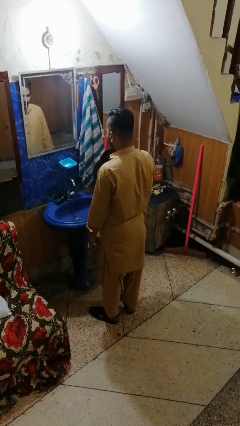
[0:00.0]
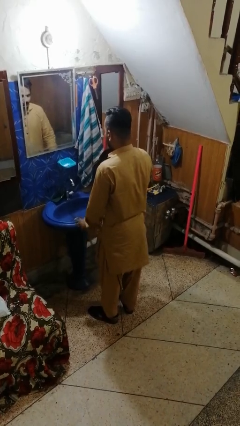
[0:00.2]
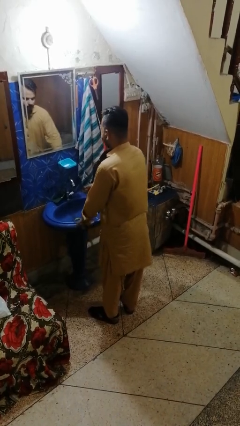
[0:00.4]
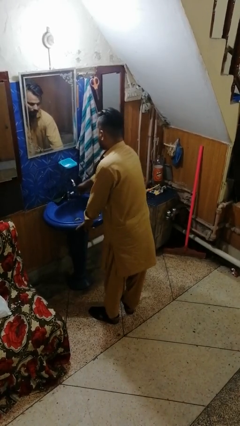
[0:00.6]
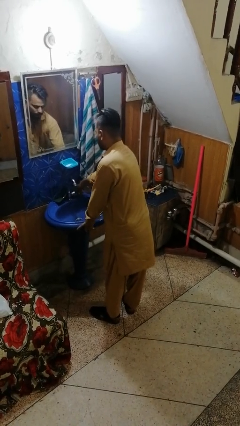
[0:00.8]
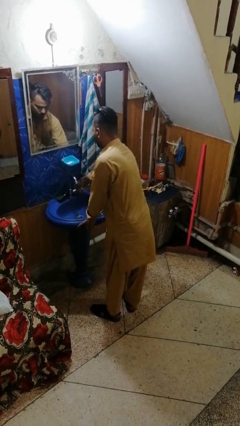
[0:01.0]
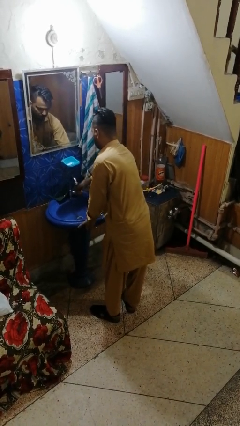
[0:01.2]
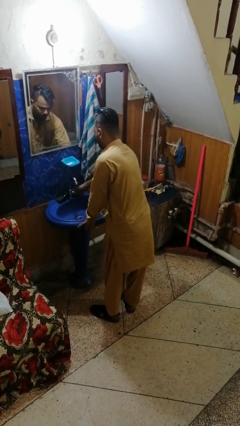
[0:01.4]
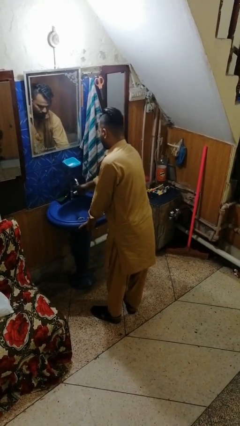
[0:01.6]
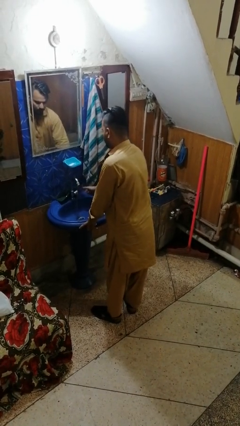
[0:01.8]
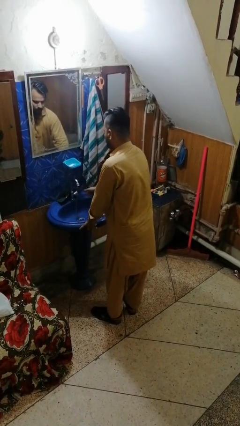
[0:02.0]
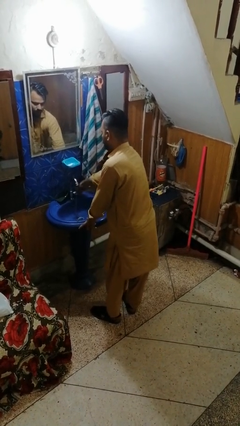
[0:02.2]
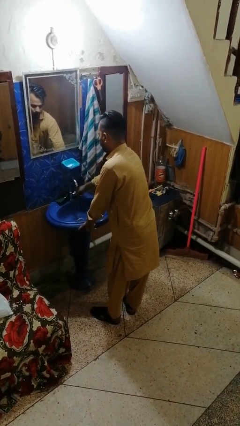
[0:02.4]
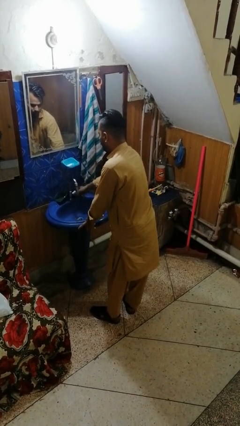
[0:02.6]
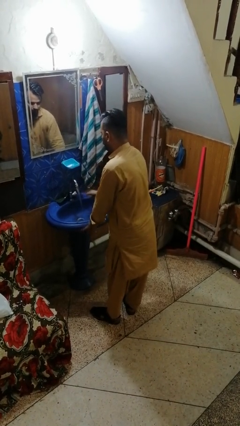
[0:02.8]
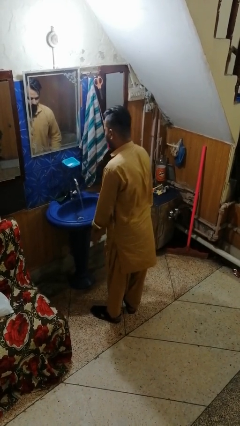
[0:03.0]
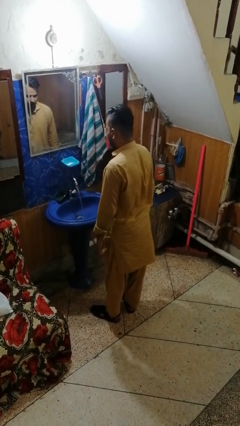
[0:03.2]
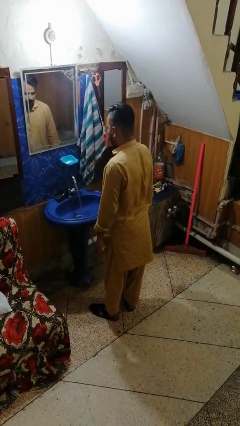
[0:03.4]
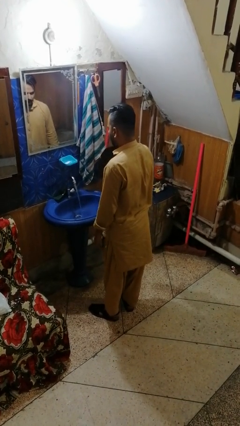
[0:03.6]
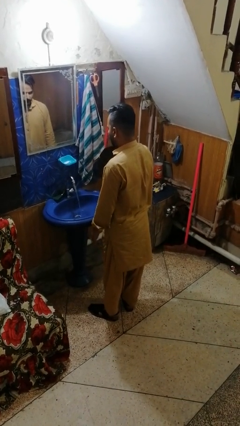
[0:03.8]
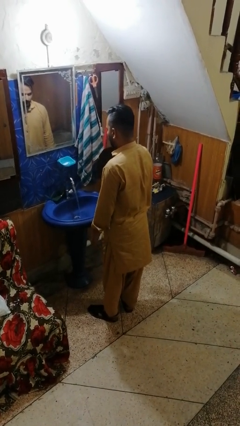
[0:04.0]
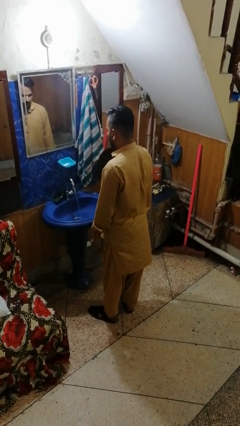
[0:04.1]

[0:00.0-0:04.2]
person turns on faucet

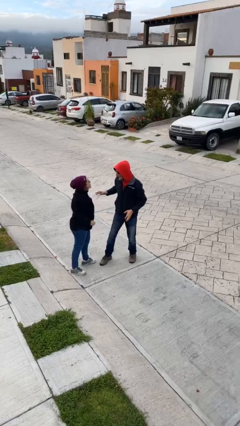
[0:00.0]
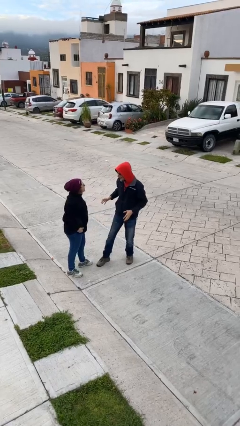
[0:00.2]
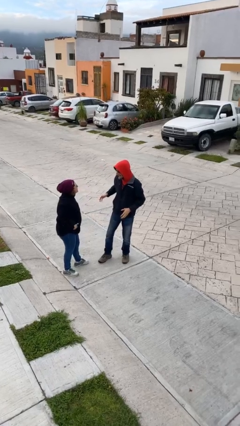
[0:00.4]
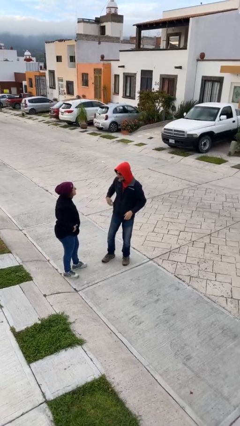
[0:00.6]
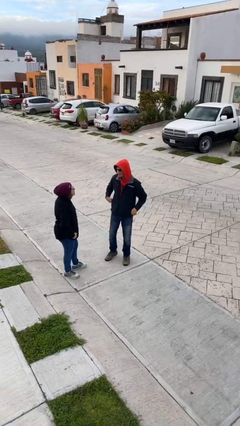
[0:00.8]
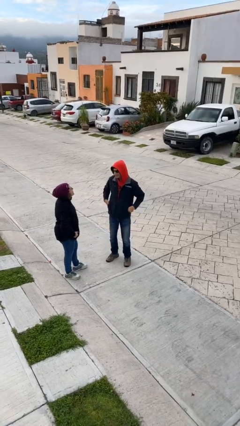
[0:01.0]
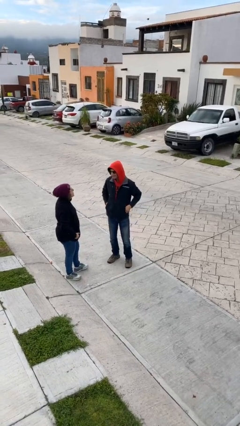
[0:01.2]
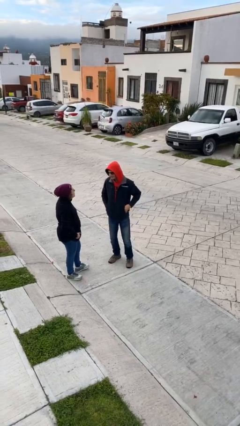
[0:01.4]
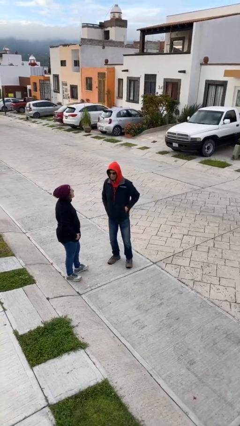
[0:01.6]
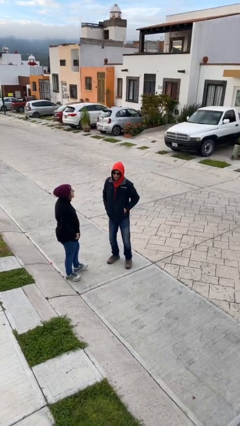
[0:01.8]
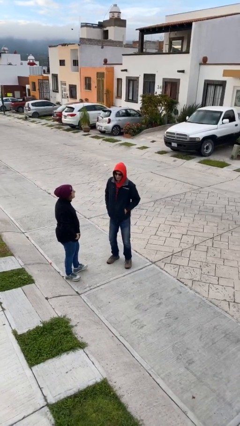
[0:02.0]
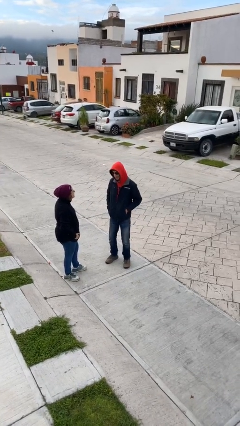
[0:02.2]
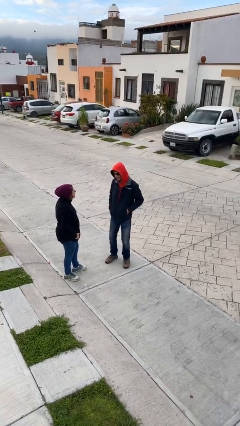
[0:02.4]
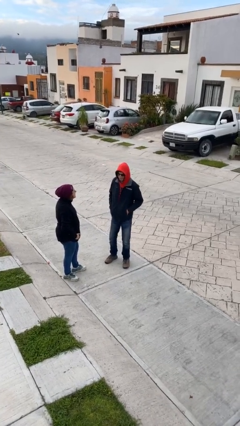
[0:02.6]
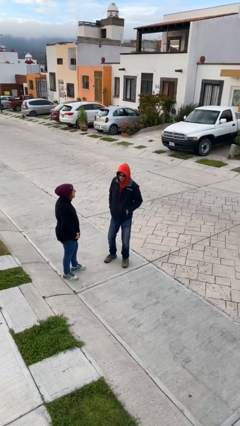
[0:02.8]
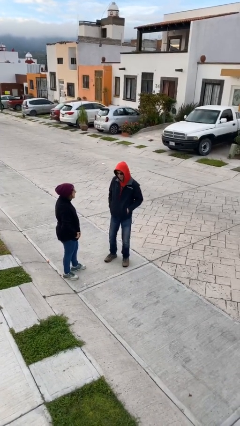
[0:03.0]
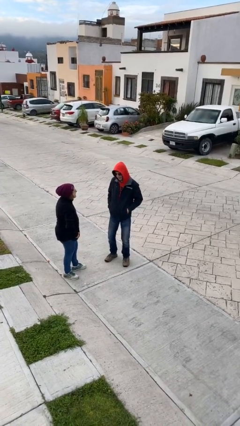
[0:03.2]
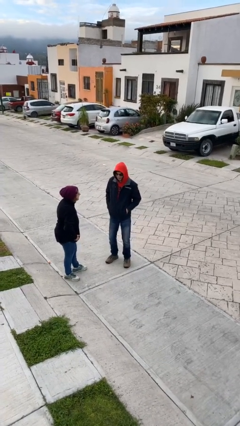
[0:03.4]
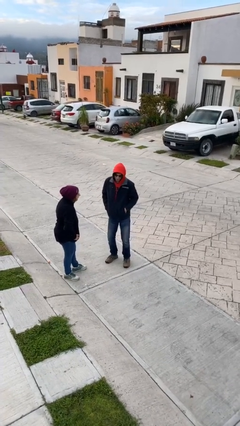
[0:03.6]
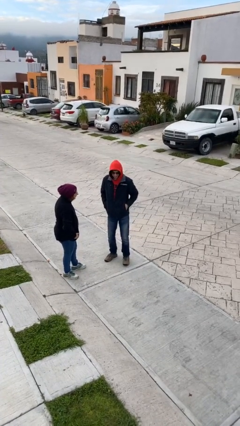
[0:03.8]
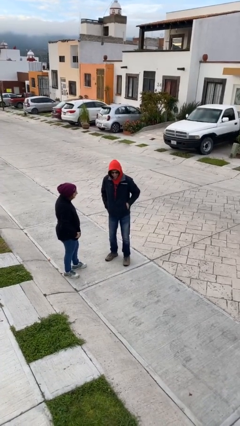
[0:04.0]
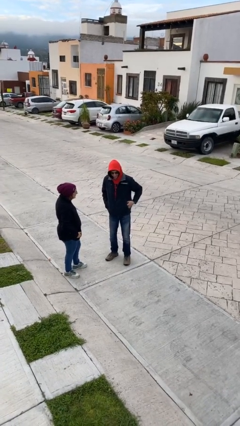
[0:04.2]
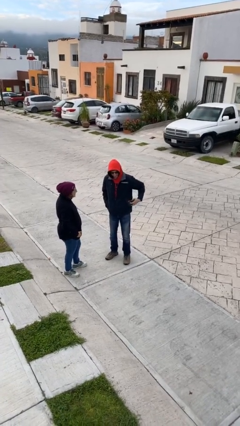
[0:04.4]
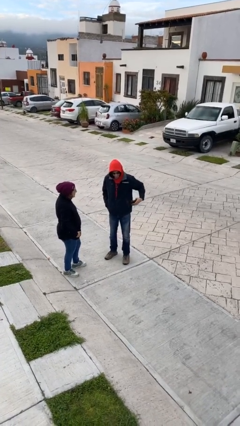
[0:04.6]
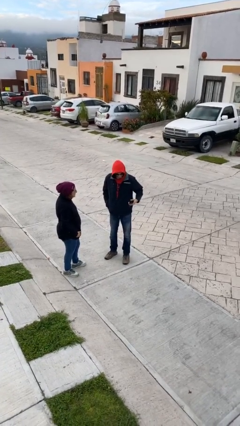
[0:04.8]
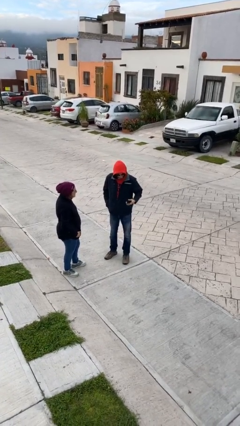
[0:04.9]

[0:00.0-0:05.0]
person talks to person

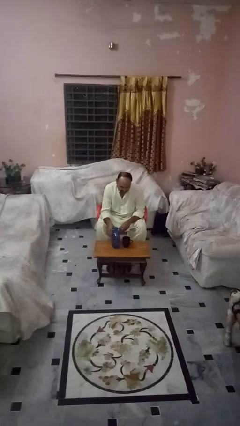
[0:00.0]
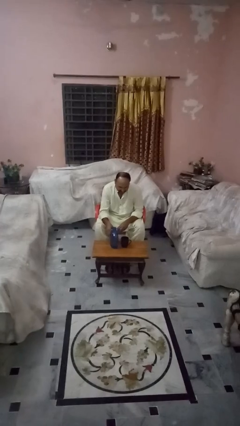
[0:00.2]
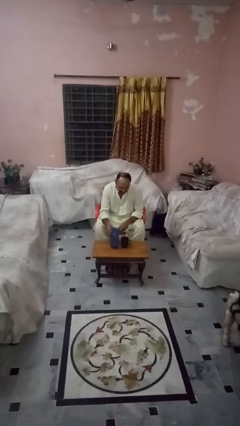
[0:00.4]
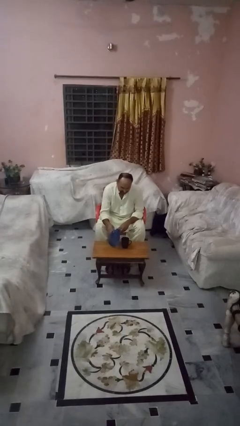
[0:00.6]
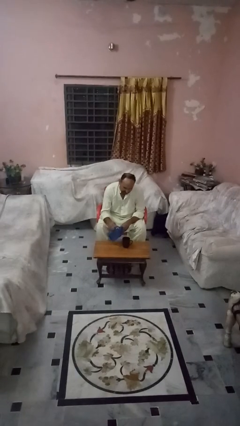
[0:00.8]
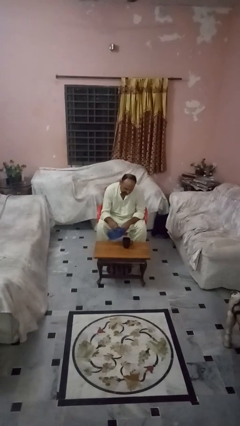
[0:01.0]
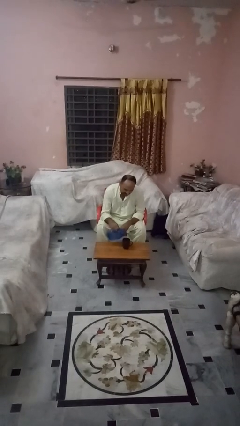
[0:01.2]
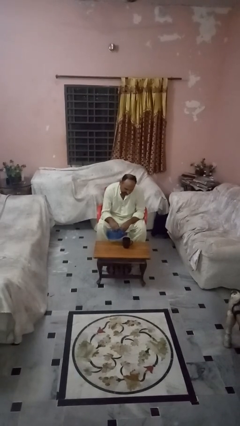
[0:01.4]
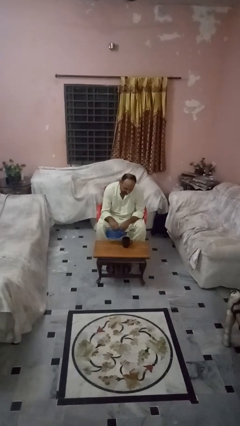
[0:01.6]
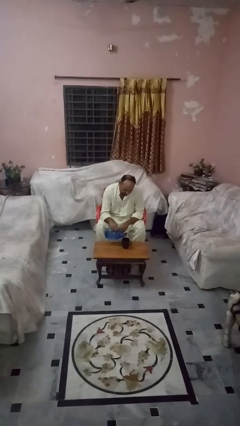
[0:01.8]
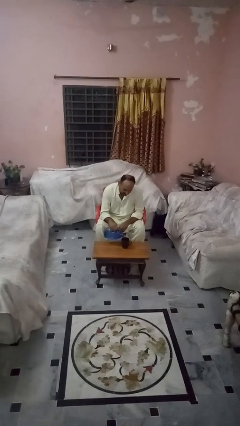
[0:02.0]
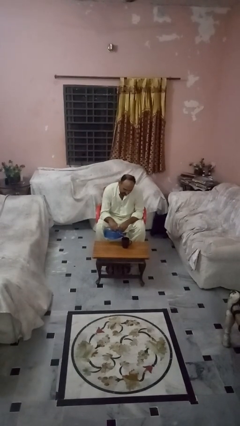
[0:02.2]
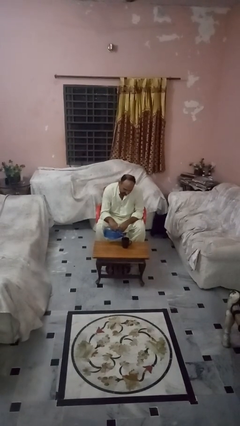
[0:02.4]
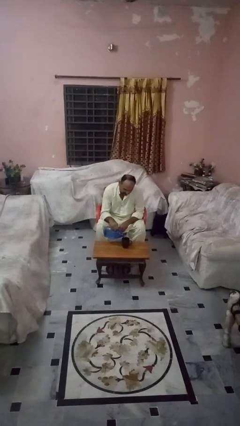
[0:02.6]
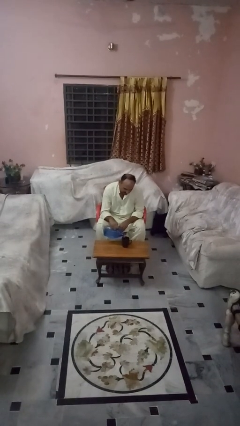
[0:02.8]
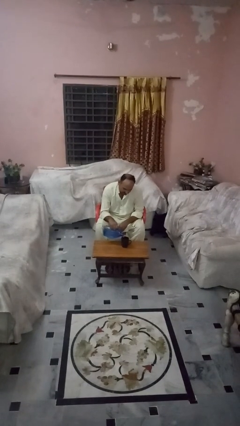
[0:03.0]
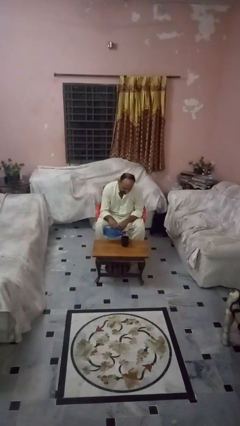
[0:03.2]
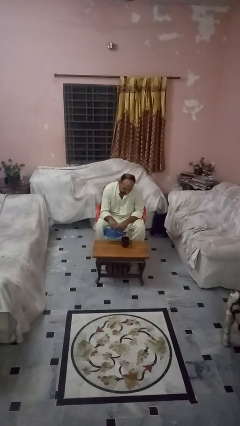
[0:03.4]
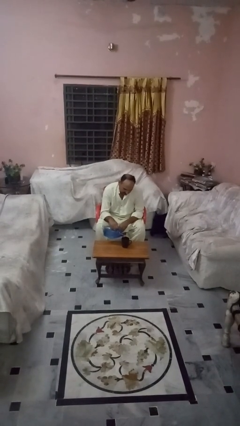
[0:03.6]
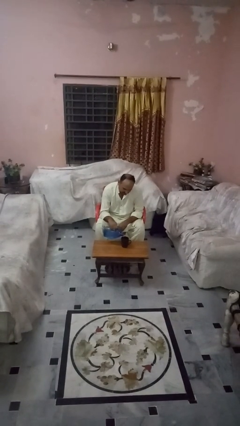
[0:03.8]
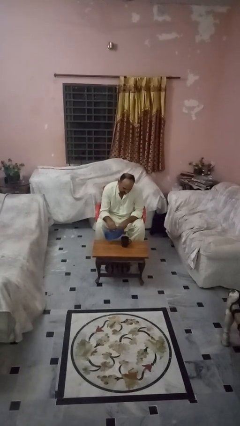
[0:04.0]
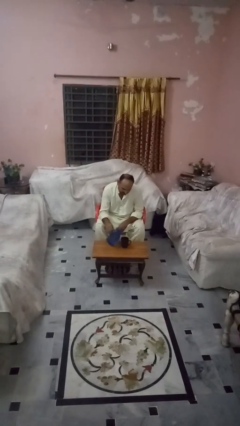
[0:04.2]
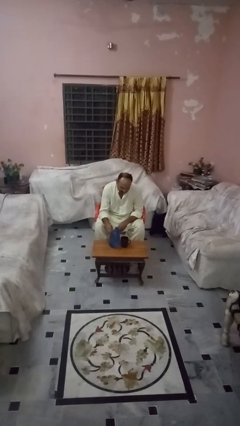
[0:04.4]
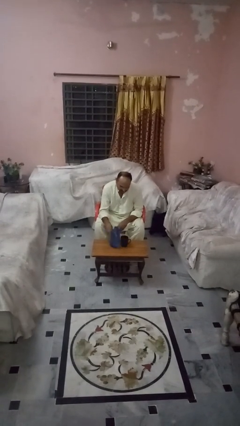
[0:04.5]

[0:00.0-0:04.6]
person pours liquid into cup

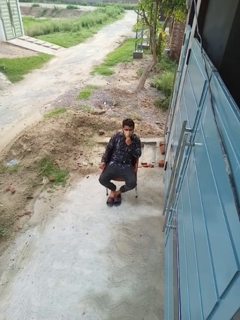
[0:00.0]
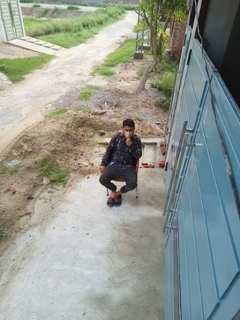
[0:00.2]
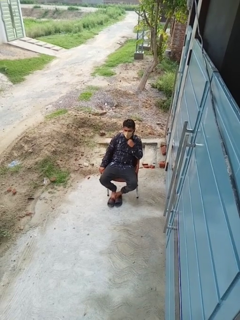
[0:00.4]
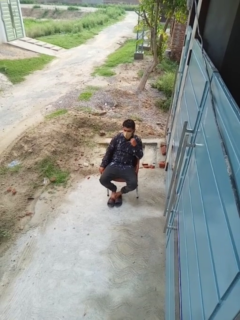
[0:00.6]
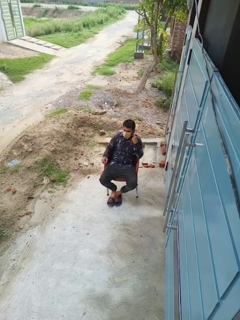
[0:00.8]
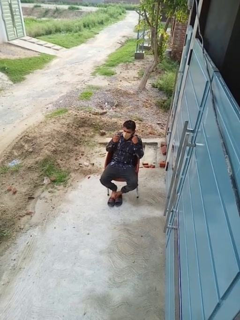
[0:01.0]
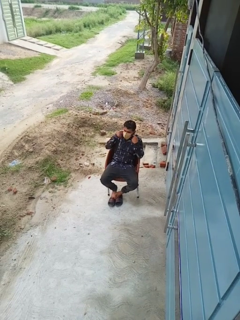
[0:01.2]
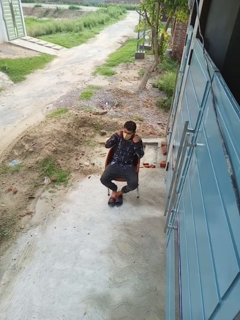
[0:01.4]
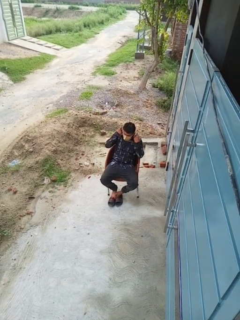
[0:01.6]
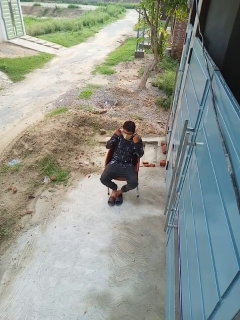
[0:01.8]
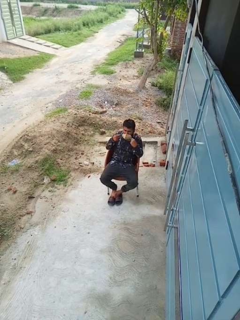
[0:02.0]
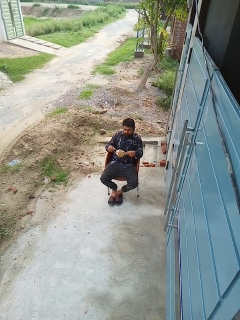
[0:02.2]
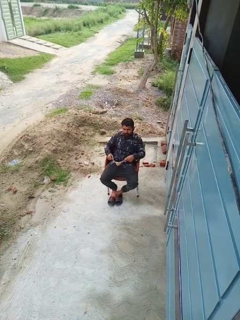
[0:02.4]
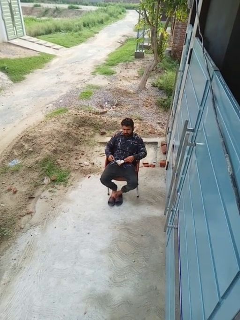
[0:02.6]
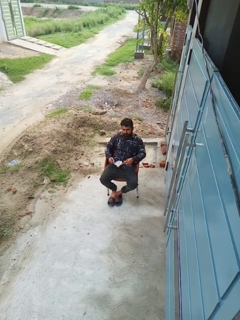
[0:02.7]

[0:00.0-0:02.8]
person takes off facemask

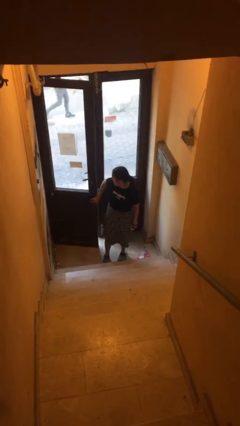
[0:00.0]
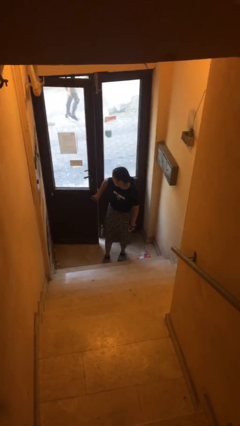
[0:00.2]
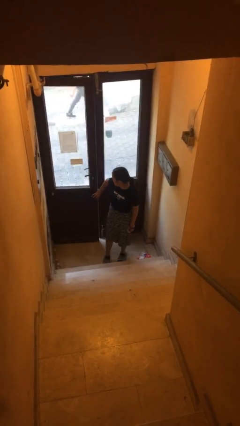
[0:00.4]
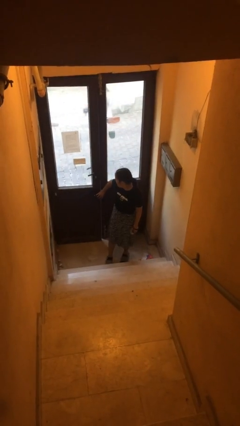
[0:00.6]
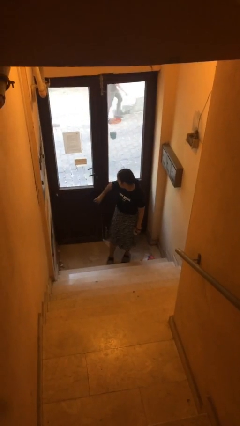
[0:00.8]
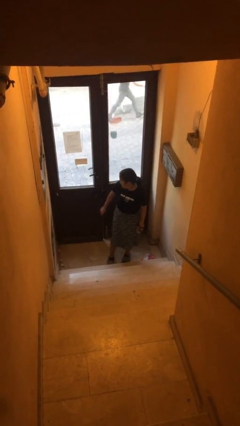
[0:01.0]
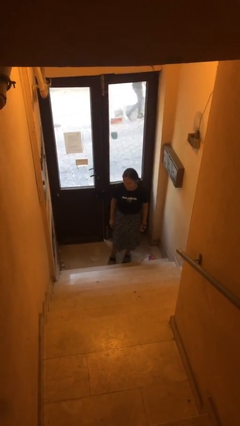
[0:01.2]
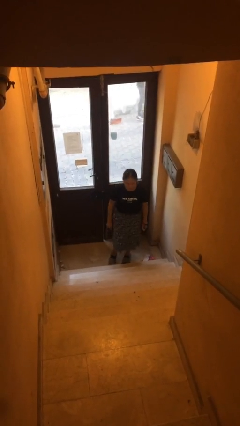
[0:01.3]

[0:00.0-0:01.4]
person closes facility door

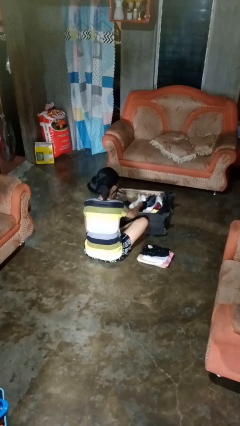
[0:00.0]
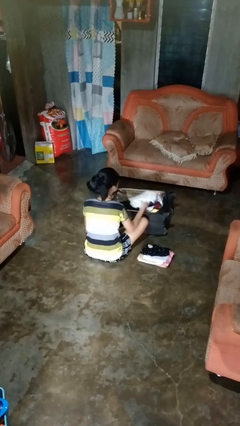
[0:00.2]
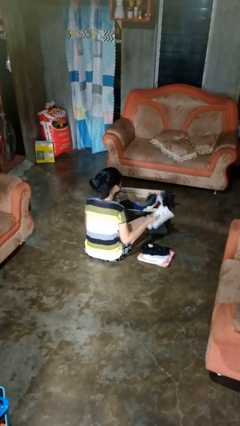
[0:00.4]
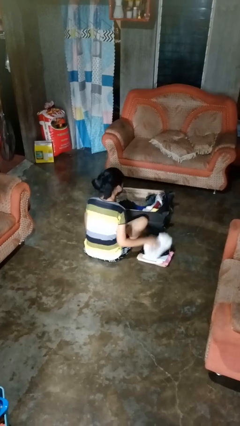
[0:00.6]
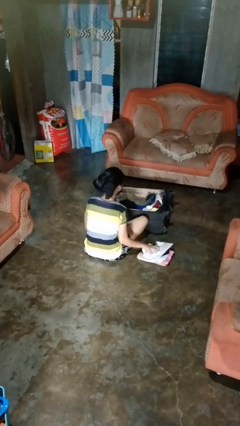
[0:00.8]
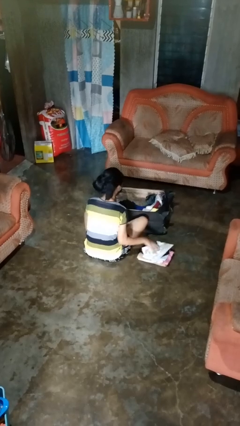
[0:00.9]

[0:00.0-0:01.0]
person unloads clothes from suitcase
